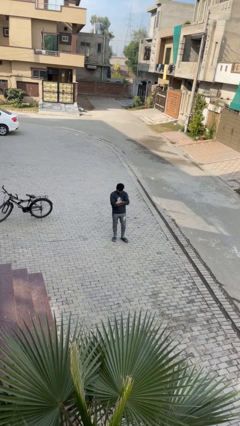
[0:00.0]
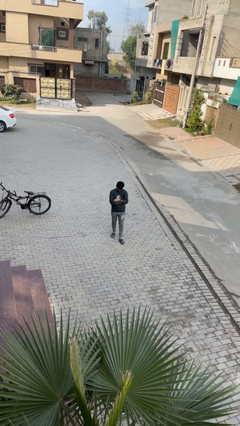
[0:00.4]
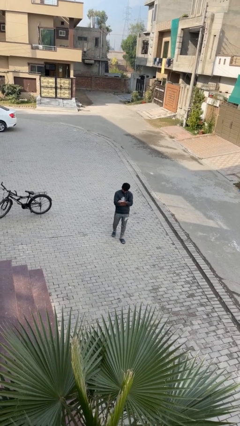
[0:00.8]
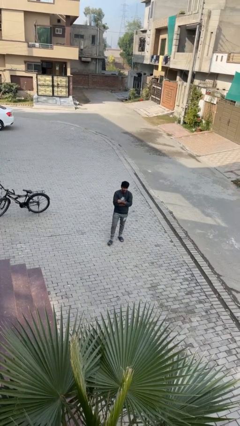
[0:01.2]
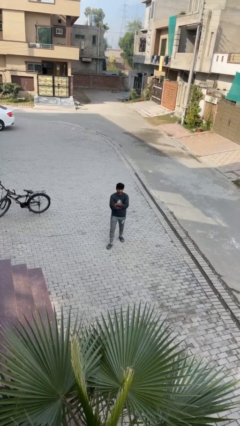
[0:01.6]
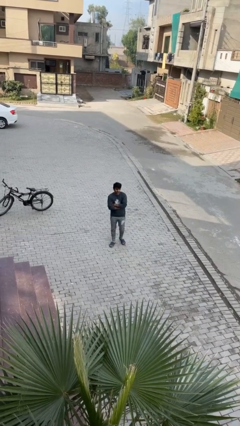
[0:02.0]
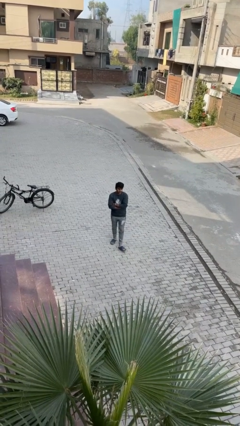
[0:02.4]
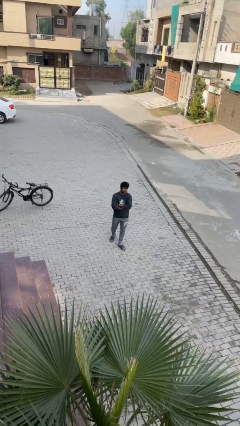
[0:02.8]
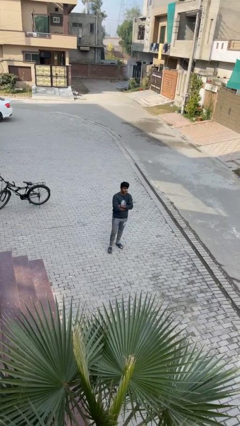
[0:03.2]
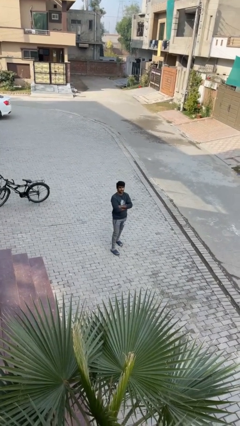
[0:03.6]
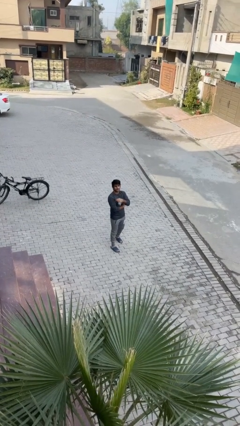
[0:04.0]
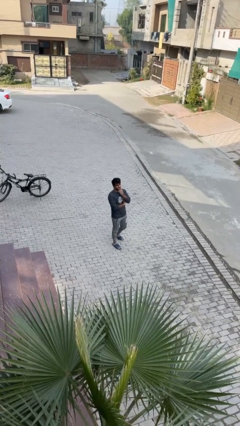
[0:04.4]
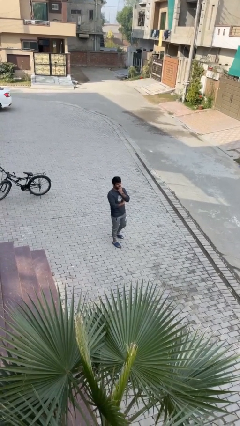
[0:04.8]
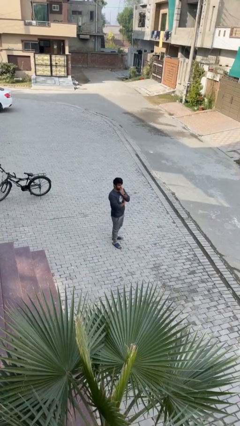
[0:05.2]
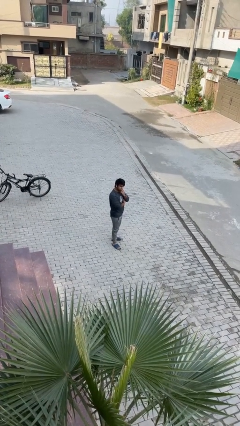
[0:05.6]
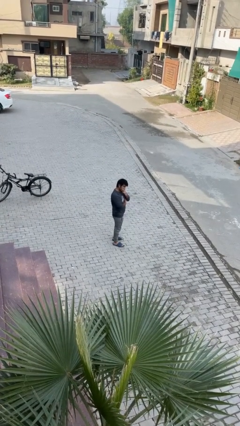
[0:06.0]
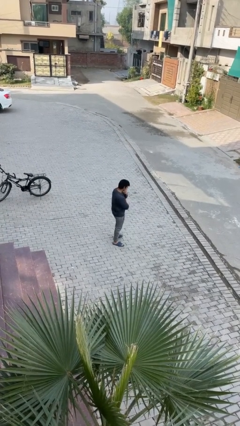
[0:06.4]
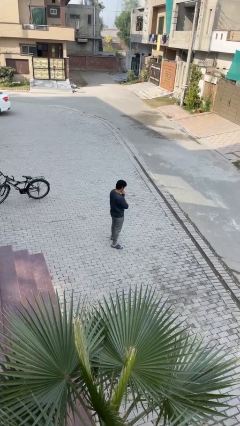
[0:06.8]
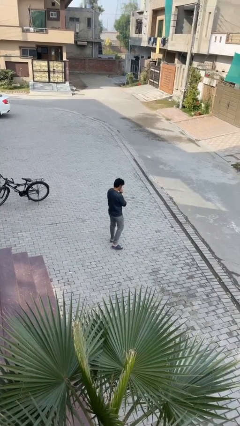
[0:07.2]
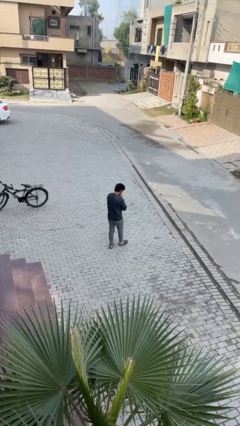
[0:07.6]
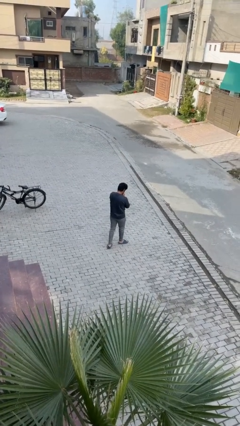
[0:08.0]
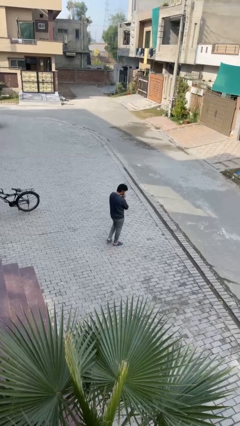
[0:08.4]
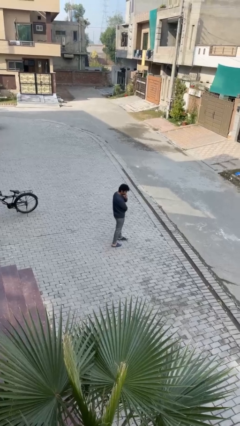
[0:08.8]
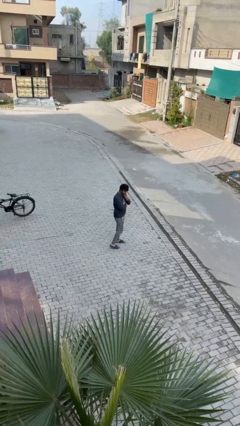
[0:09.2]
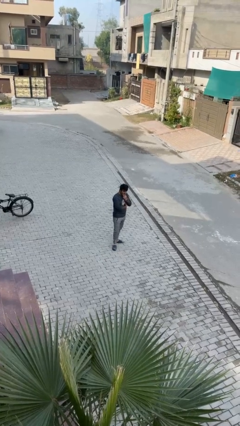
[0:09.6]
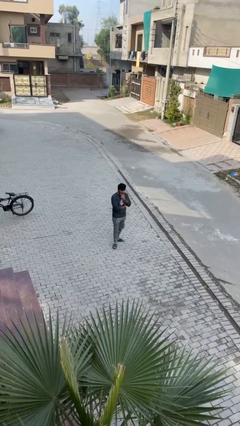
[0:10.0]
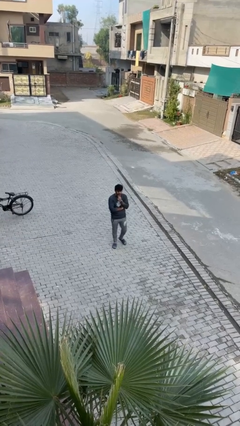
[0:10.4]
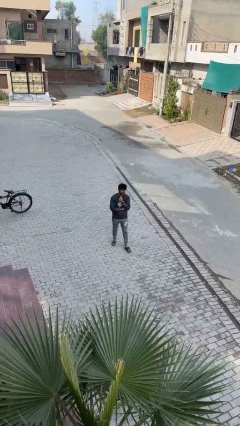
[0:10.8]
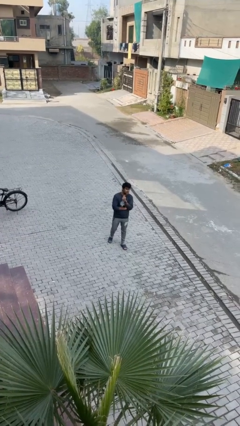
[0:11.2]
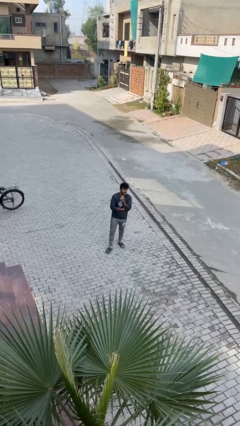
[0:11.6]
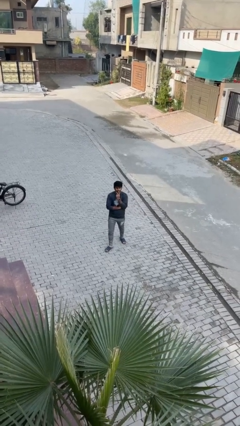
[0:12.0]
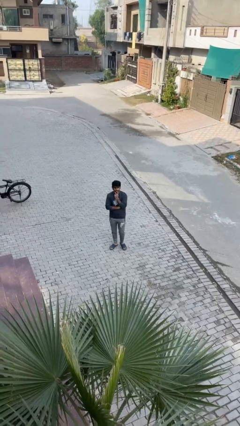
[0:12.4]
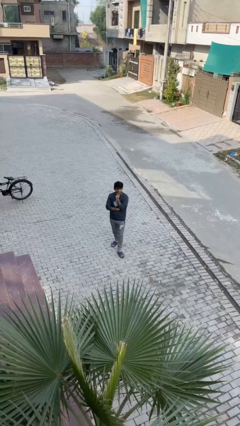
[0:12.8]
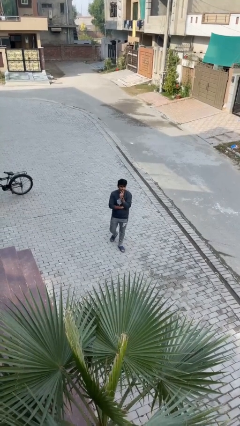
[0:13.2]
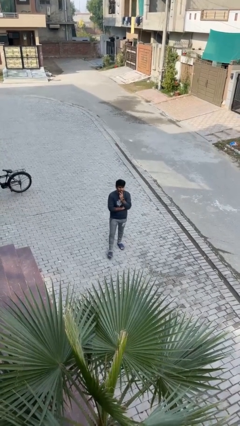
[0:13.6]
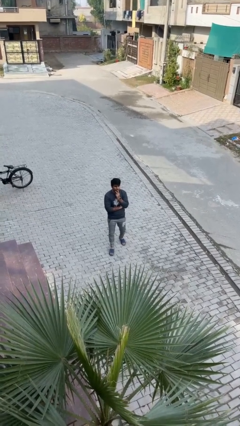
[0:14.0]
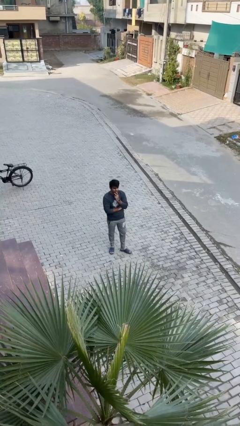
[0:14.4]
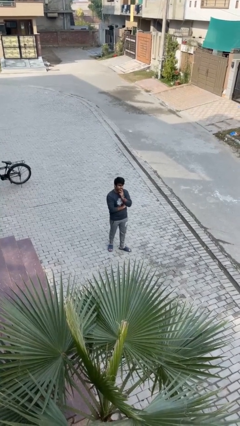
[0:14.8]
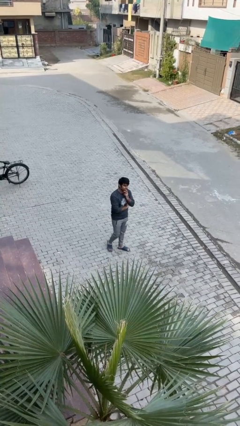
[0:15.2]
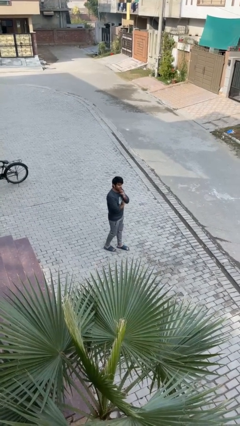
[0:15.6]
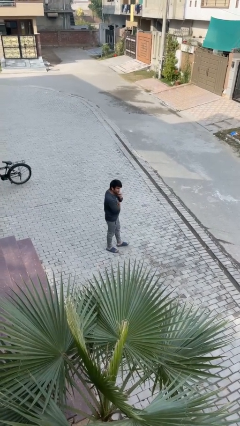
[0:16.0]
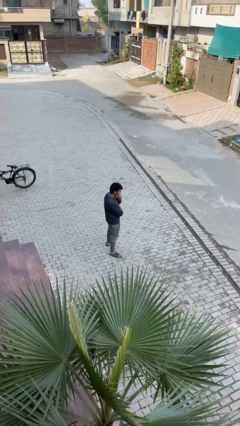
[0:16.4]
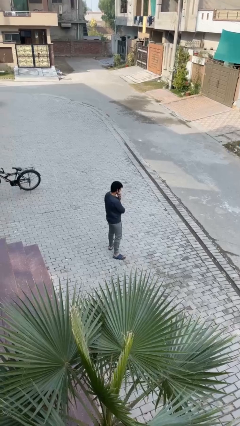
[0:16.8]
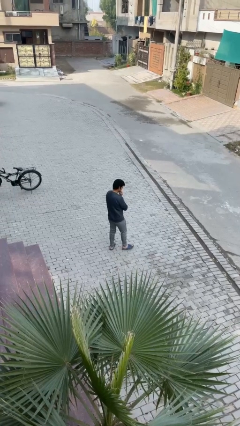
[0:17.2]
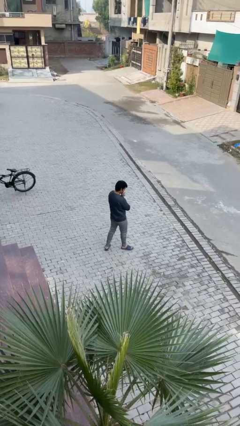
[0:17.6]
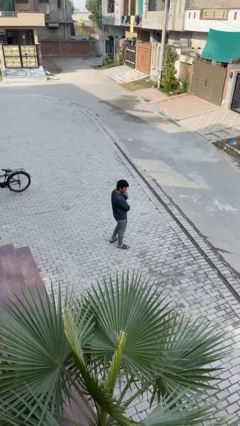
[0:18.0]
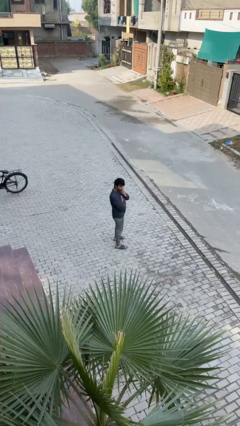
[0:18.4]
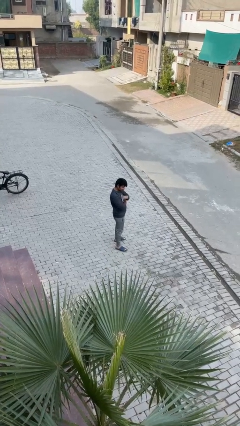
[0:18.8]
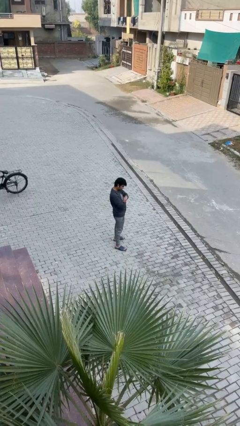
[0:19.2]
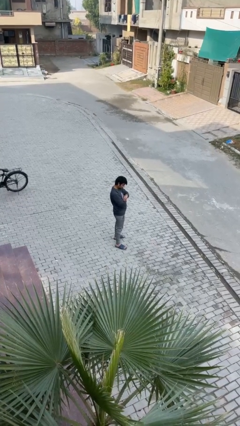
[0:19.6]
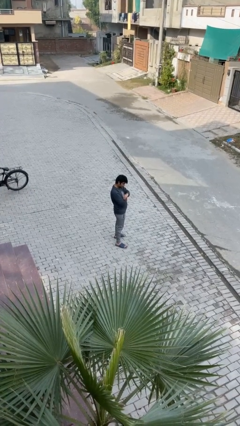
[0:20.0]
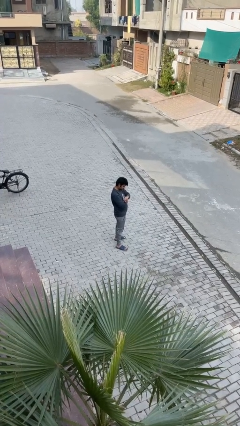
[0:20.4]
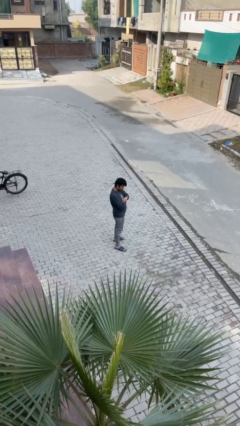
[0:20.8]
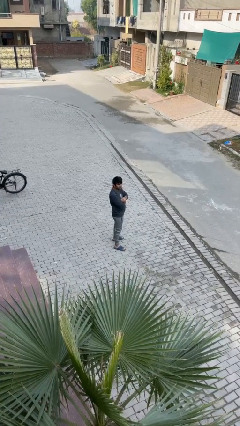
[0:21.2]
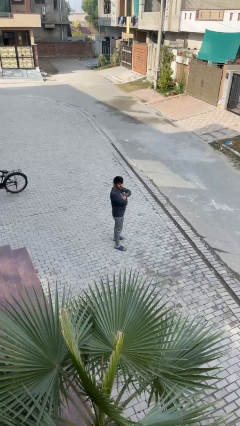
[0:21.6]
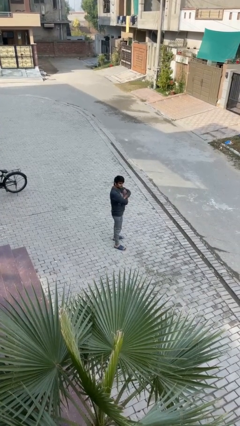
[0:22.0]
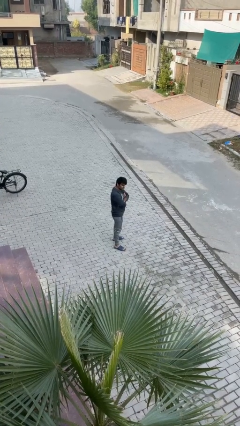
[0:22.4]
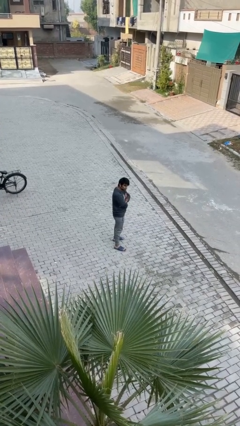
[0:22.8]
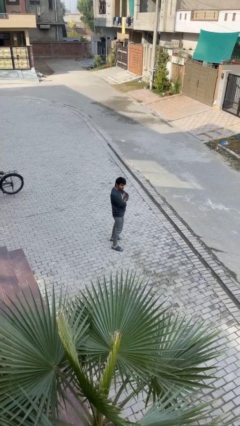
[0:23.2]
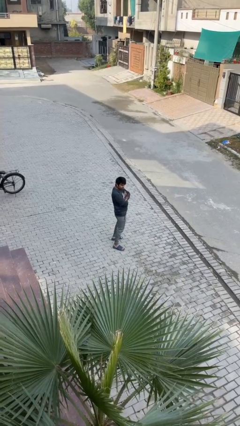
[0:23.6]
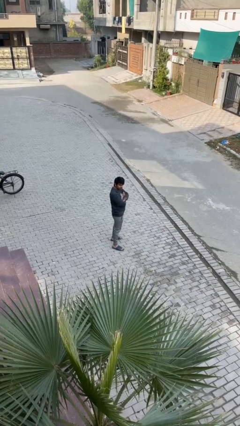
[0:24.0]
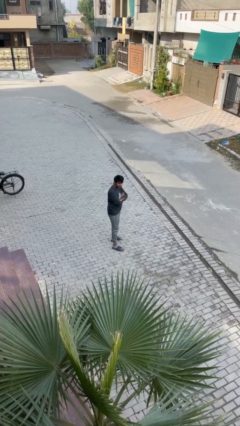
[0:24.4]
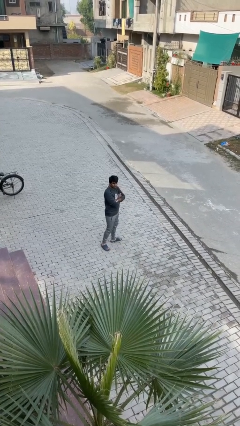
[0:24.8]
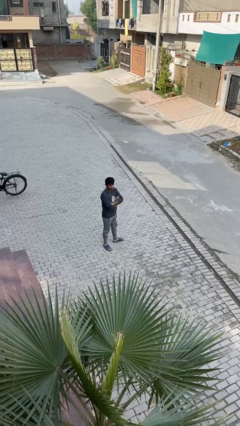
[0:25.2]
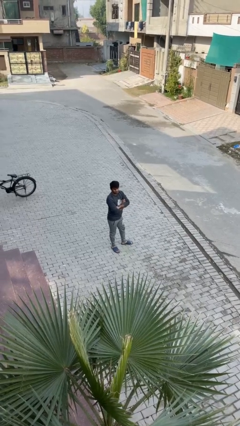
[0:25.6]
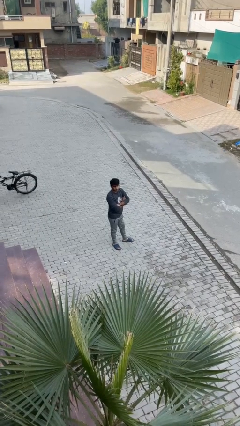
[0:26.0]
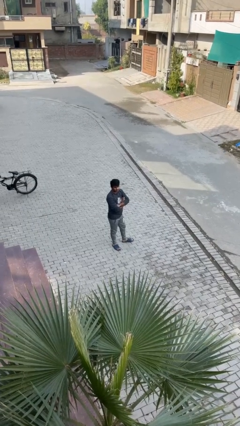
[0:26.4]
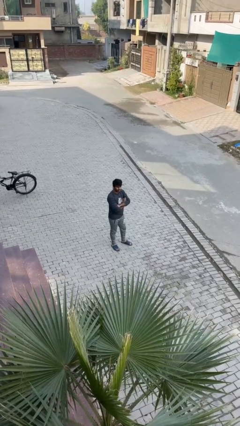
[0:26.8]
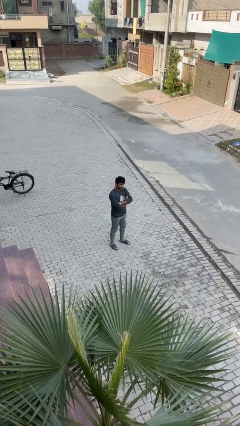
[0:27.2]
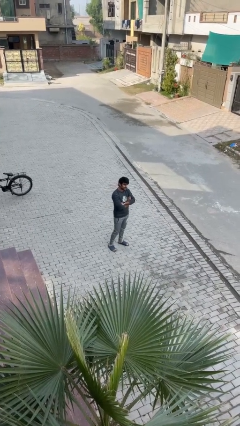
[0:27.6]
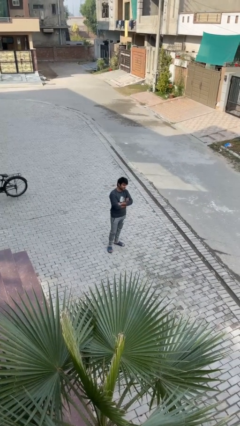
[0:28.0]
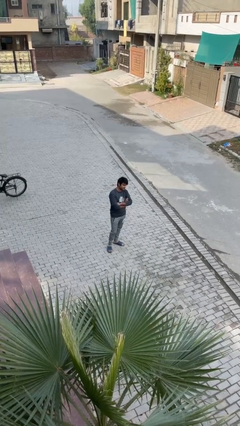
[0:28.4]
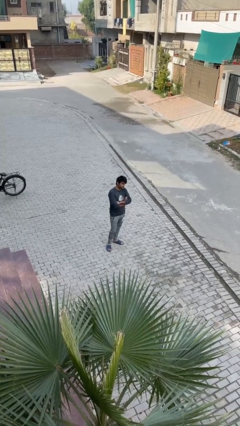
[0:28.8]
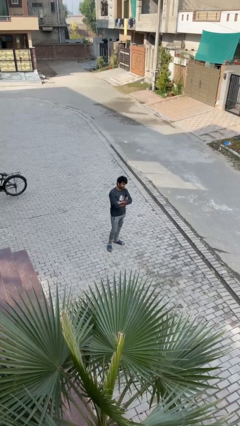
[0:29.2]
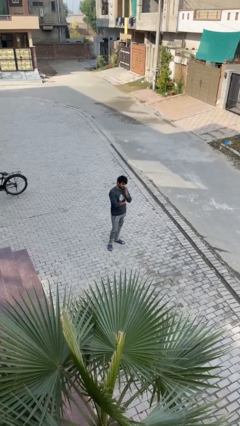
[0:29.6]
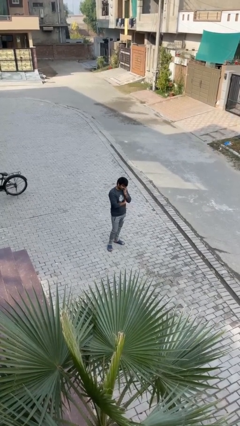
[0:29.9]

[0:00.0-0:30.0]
person walks

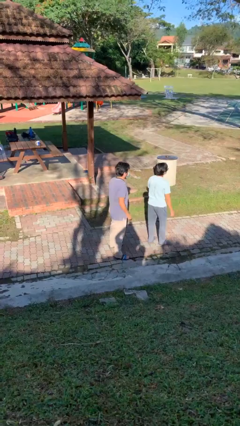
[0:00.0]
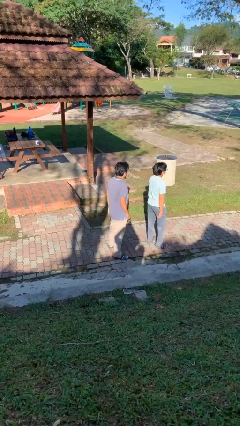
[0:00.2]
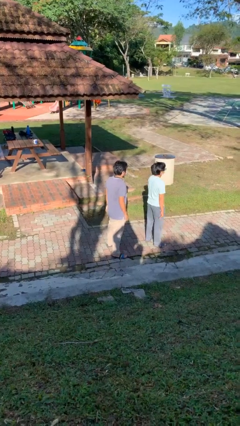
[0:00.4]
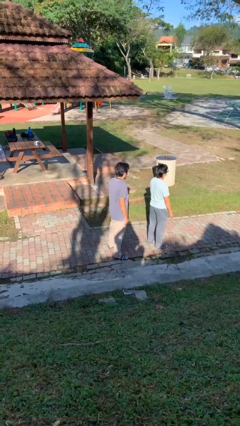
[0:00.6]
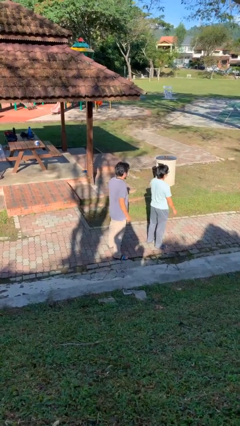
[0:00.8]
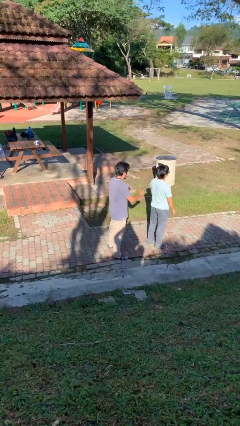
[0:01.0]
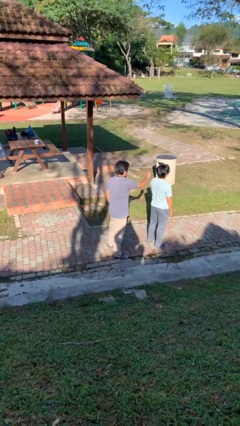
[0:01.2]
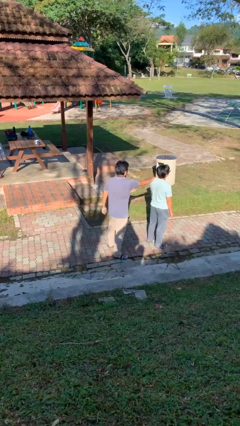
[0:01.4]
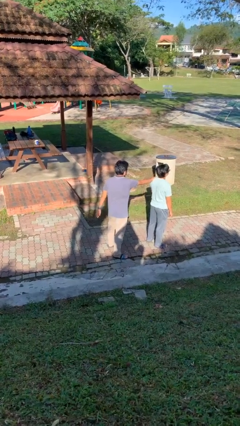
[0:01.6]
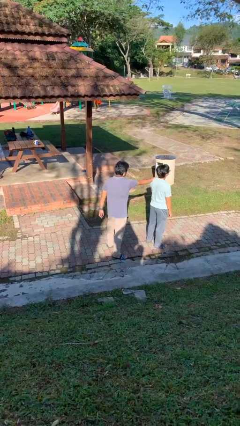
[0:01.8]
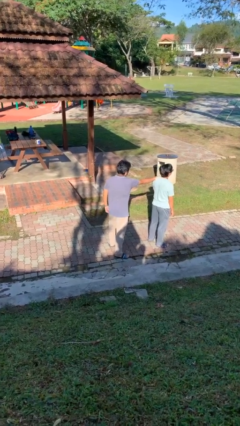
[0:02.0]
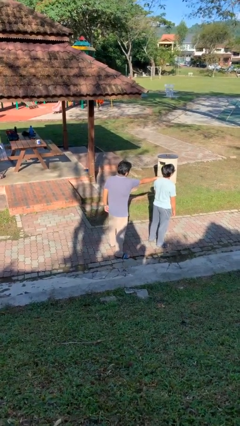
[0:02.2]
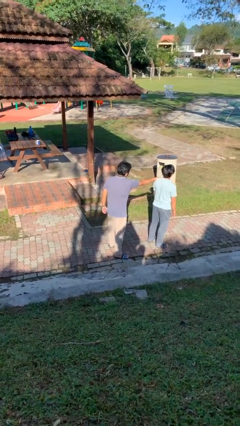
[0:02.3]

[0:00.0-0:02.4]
person grabs person by shoulder

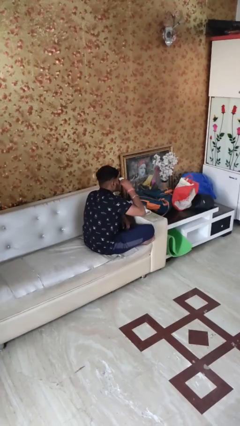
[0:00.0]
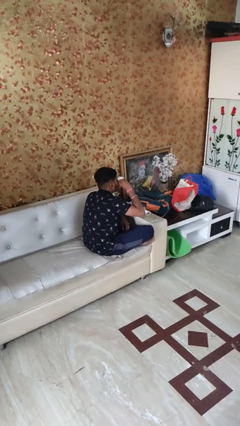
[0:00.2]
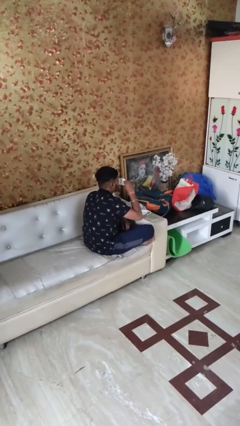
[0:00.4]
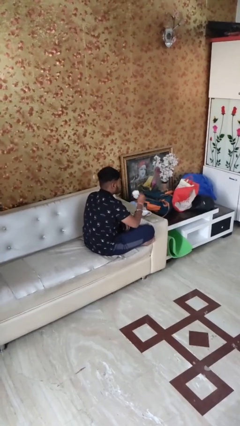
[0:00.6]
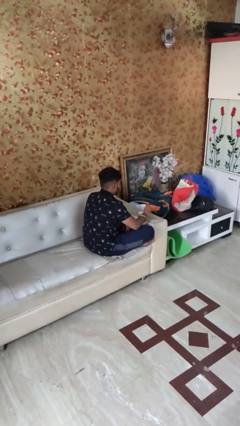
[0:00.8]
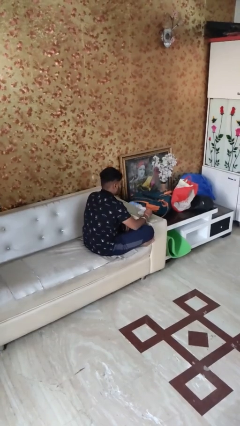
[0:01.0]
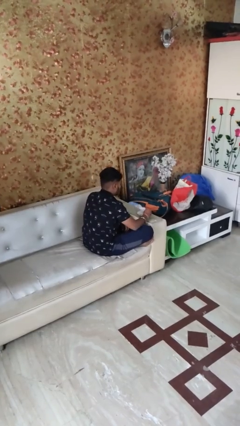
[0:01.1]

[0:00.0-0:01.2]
person drinks from mug
